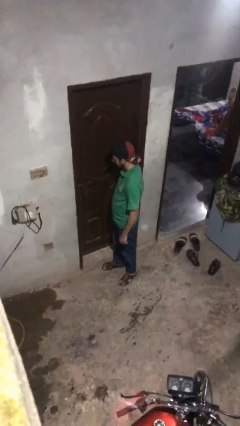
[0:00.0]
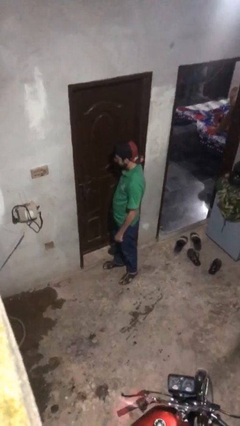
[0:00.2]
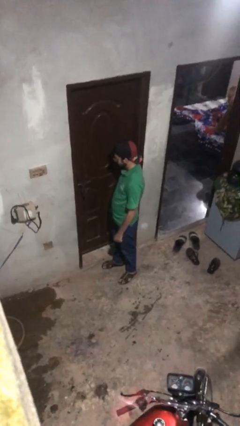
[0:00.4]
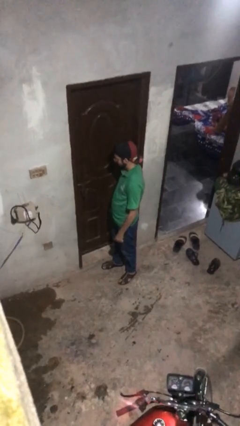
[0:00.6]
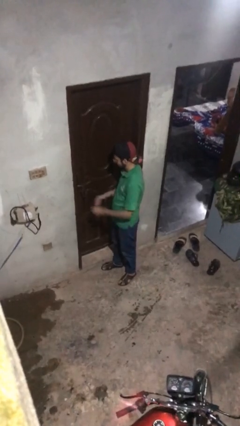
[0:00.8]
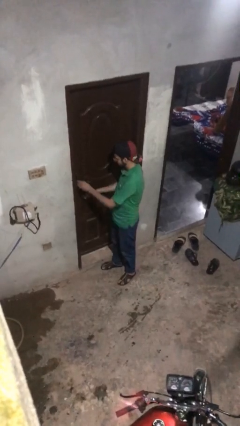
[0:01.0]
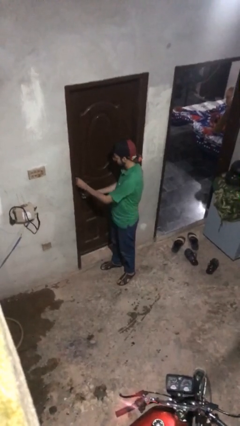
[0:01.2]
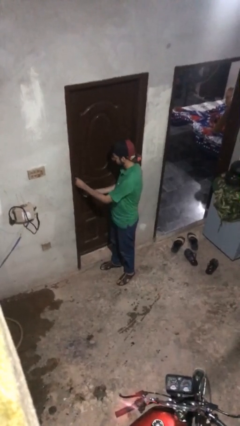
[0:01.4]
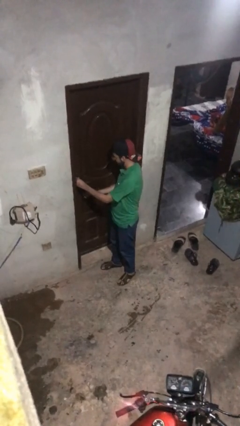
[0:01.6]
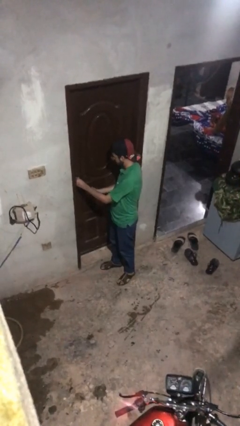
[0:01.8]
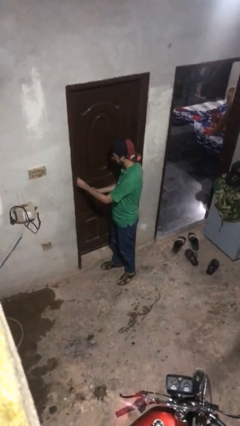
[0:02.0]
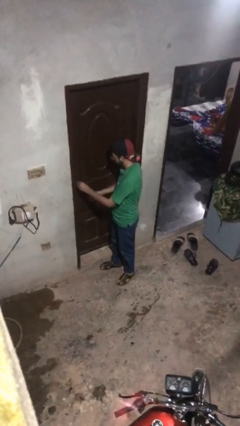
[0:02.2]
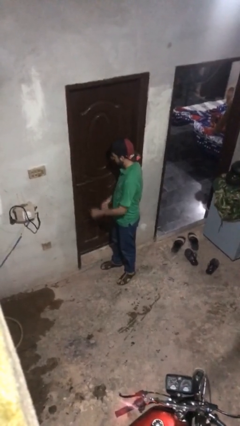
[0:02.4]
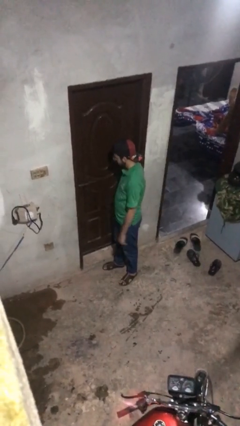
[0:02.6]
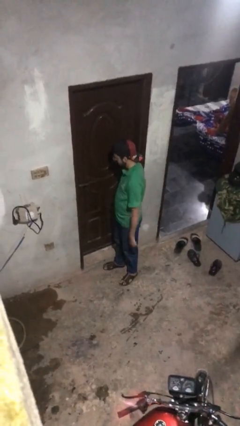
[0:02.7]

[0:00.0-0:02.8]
person unlocks door with keys

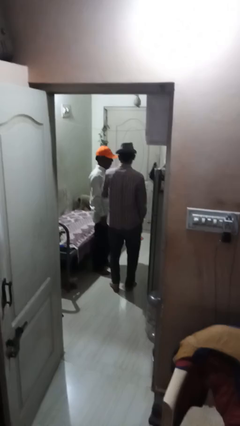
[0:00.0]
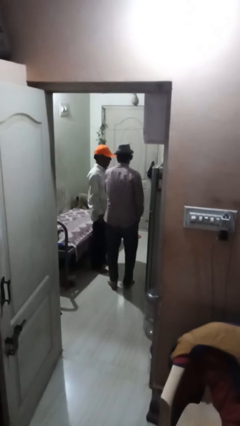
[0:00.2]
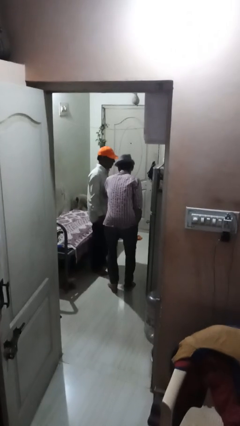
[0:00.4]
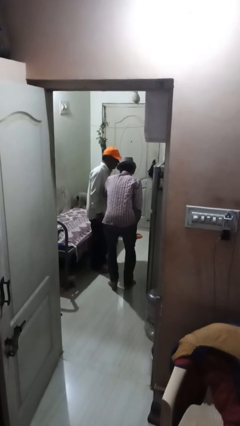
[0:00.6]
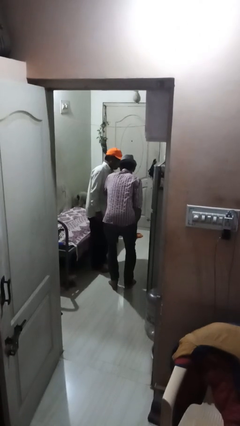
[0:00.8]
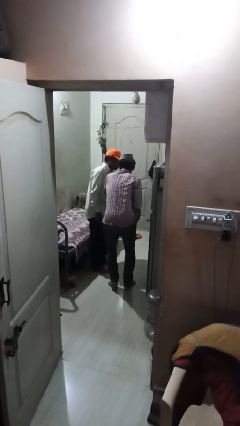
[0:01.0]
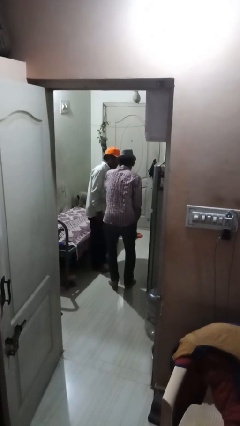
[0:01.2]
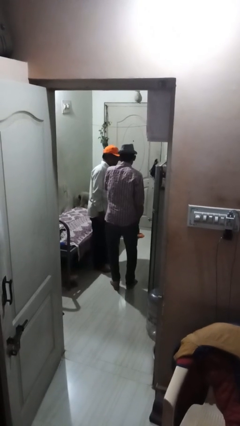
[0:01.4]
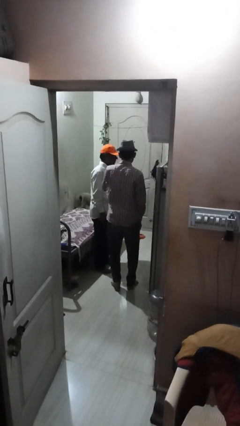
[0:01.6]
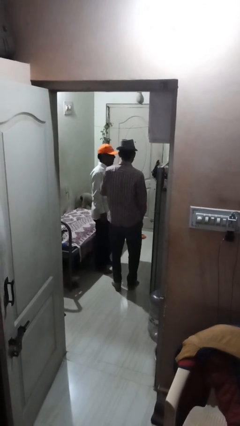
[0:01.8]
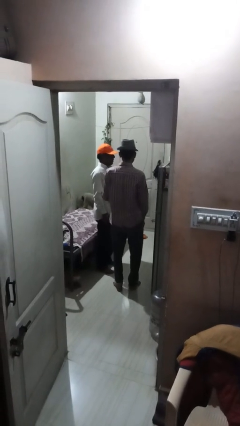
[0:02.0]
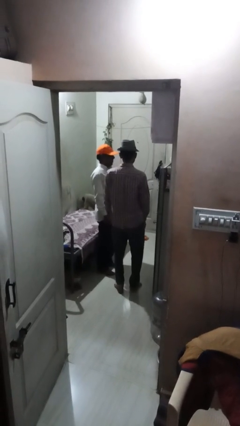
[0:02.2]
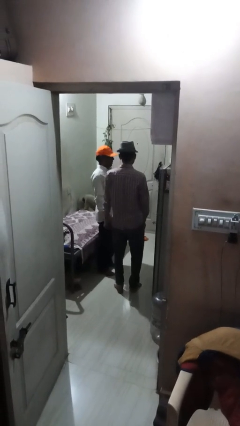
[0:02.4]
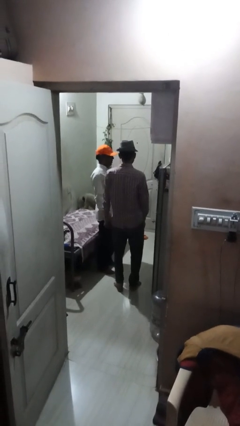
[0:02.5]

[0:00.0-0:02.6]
person nudges person with elbow

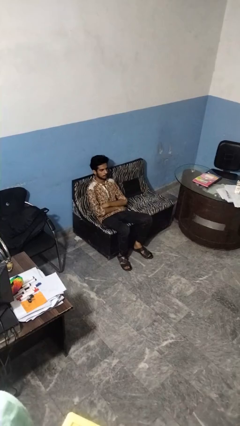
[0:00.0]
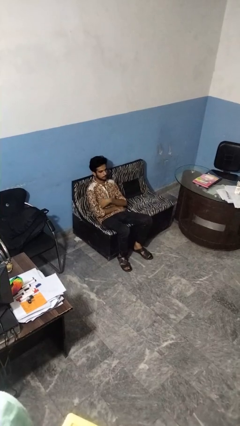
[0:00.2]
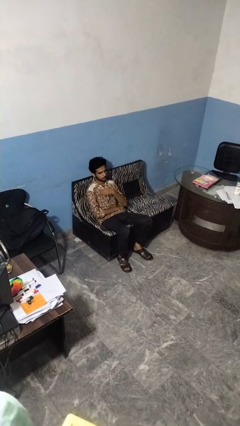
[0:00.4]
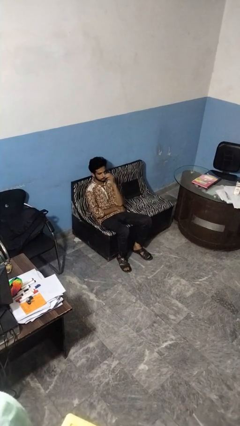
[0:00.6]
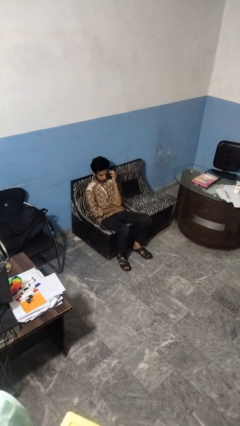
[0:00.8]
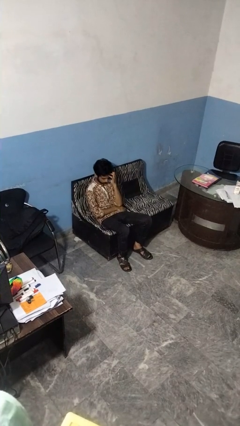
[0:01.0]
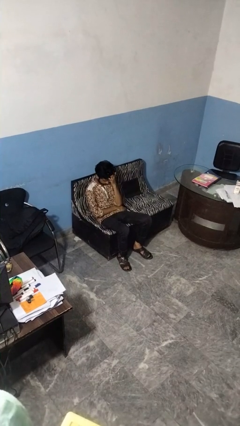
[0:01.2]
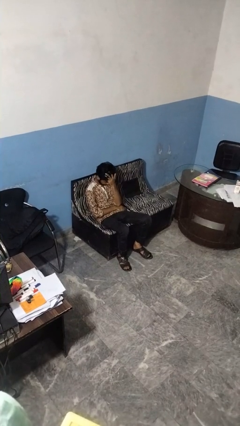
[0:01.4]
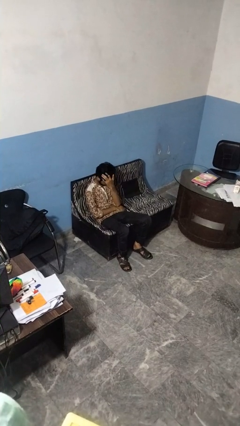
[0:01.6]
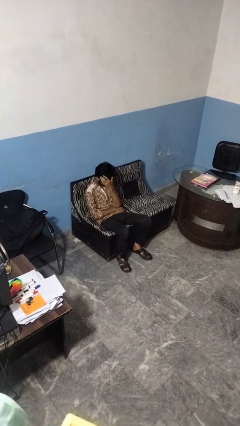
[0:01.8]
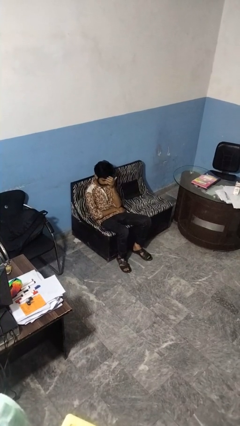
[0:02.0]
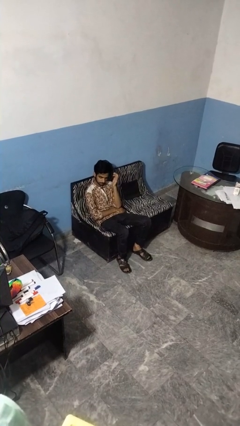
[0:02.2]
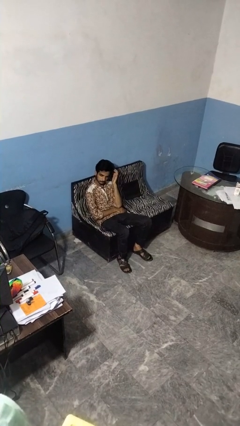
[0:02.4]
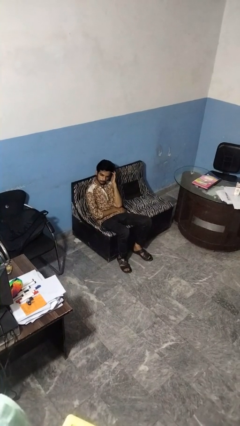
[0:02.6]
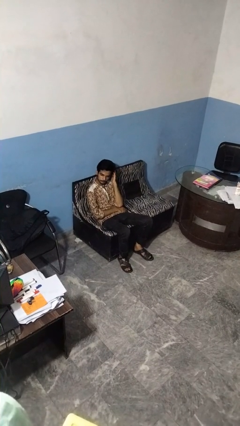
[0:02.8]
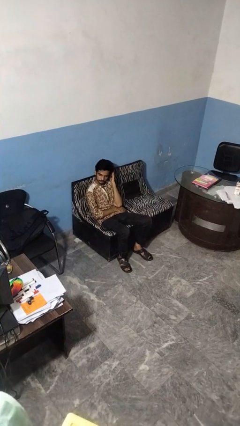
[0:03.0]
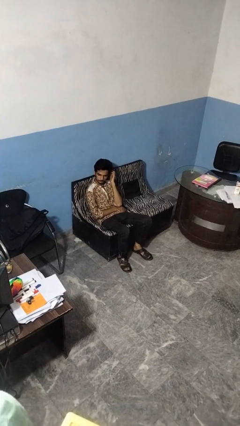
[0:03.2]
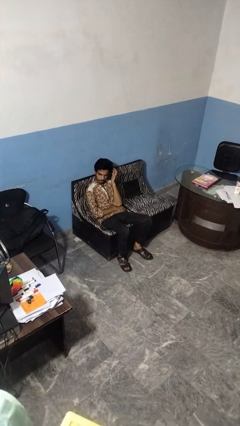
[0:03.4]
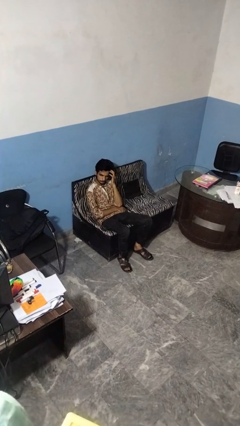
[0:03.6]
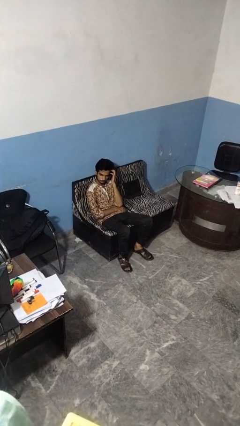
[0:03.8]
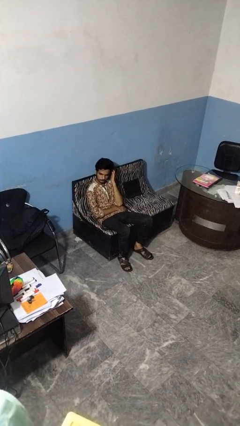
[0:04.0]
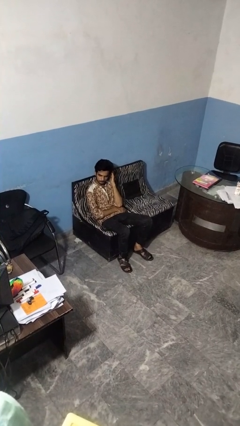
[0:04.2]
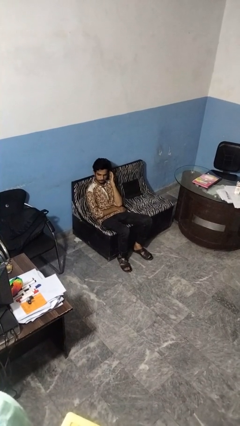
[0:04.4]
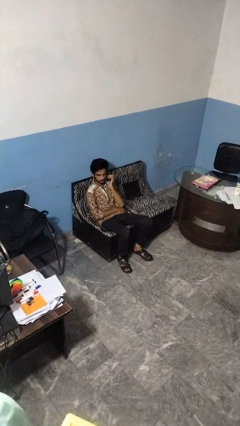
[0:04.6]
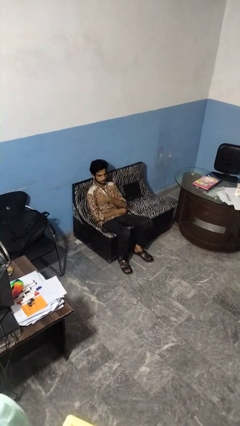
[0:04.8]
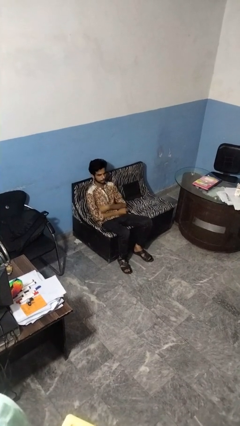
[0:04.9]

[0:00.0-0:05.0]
person strokes hair

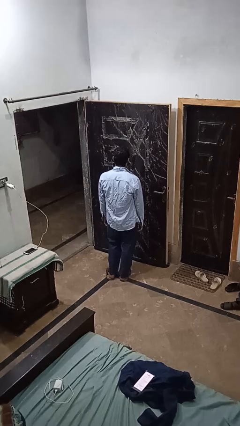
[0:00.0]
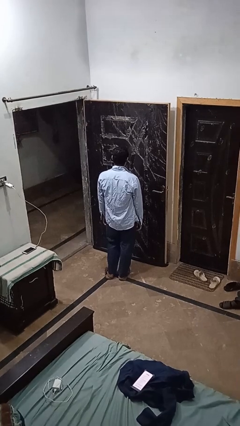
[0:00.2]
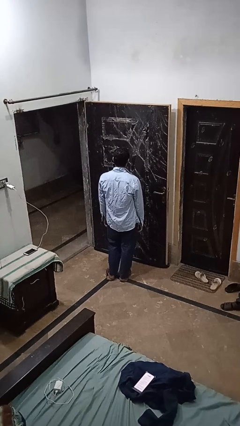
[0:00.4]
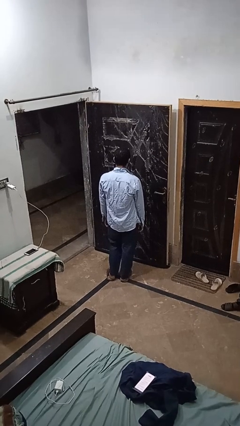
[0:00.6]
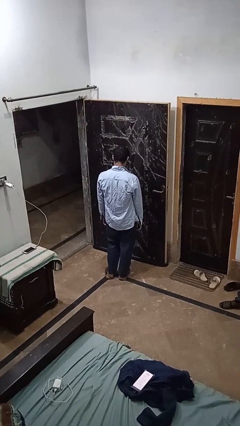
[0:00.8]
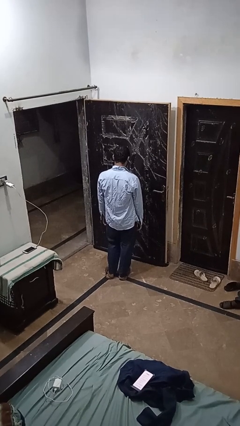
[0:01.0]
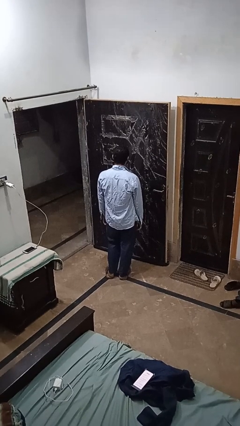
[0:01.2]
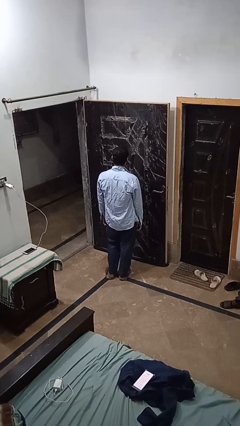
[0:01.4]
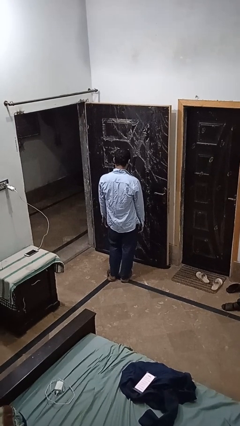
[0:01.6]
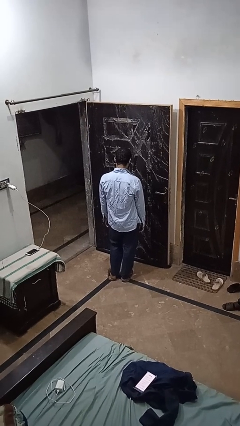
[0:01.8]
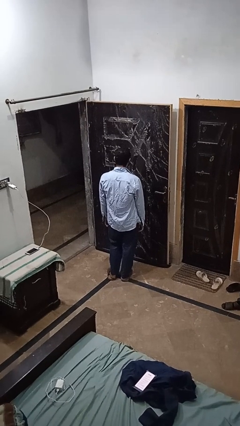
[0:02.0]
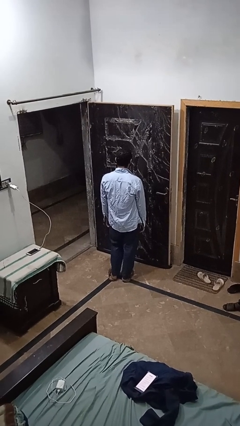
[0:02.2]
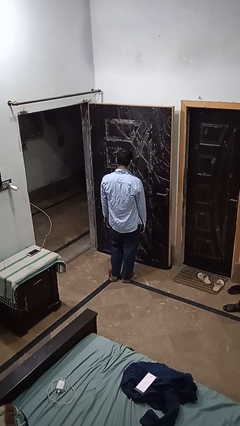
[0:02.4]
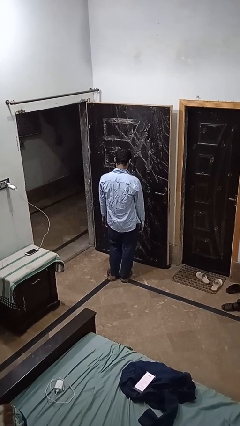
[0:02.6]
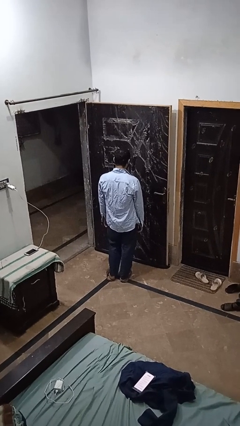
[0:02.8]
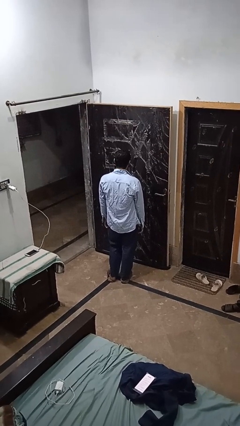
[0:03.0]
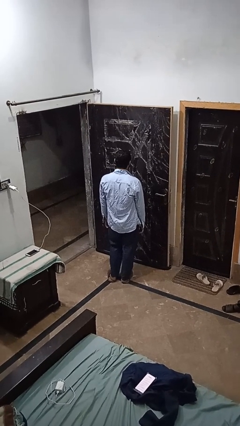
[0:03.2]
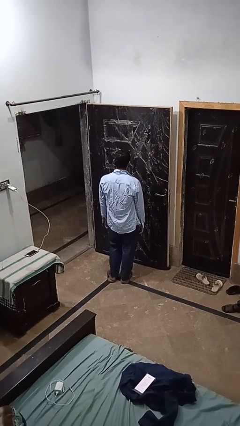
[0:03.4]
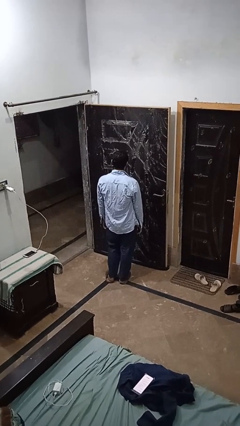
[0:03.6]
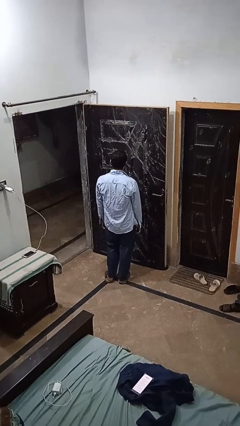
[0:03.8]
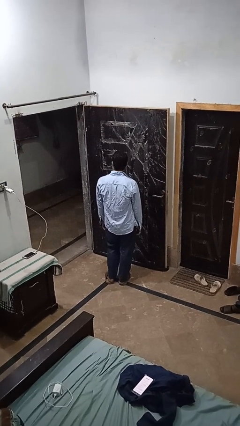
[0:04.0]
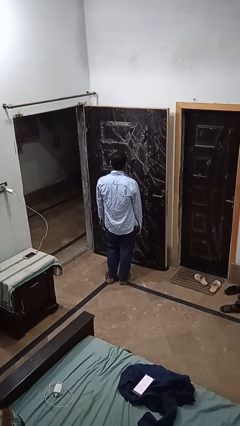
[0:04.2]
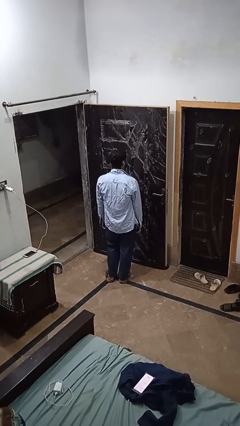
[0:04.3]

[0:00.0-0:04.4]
person nods head

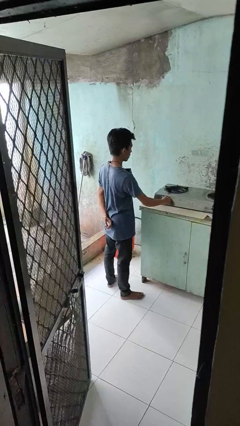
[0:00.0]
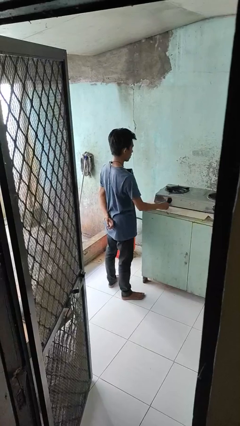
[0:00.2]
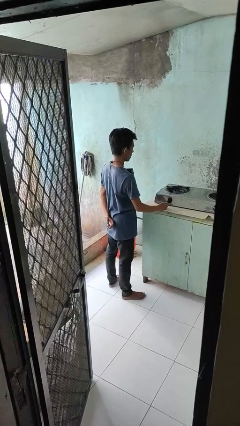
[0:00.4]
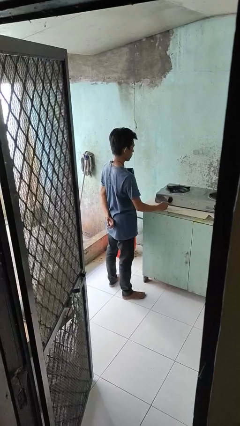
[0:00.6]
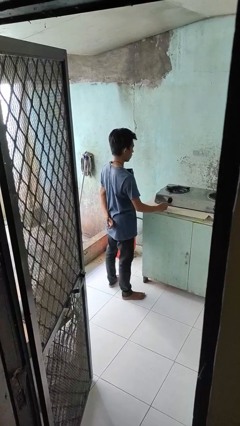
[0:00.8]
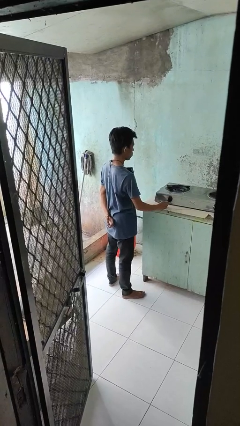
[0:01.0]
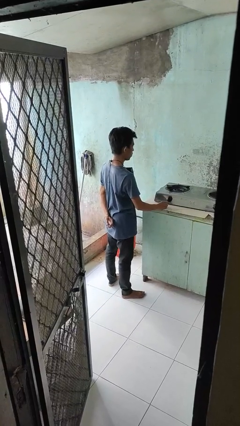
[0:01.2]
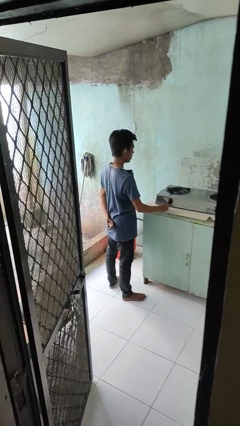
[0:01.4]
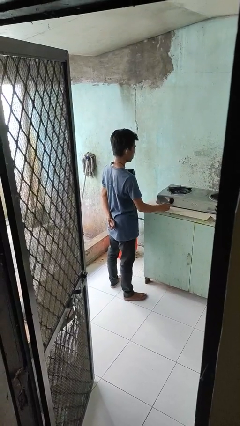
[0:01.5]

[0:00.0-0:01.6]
person turns off stovetop

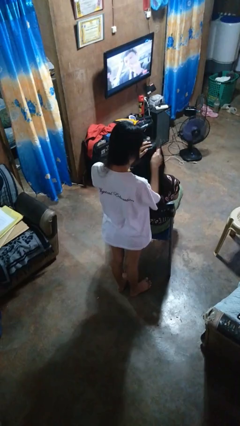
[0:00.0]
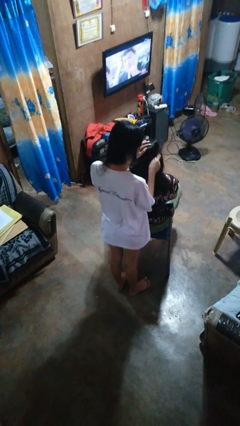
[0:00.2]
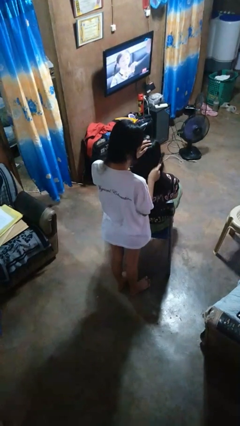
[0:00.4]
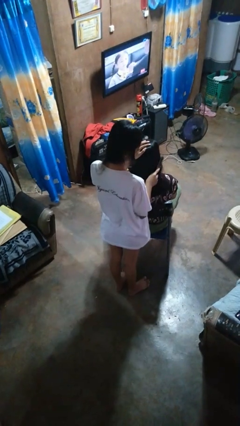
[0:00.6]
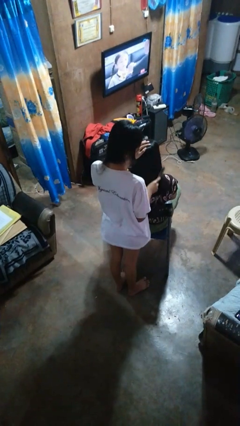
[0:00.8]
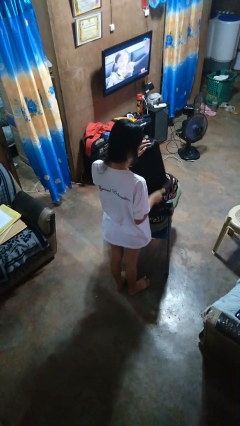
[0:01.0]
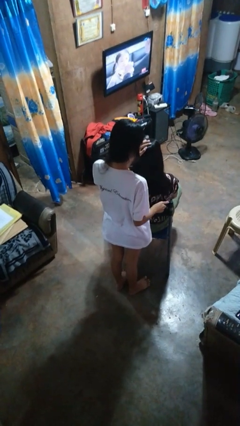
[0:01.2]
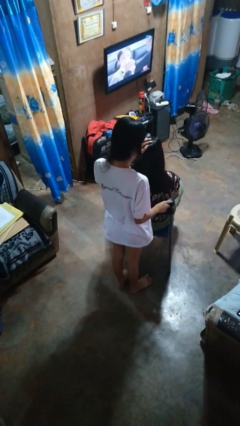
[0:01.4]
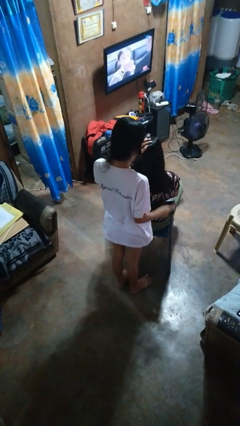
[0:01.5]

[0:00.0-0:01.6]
person brushes hair of person
